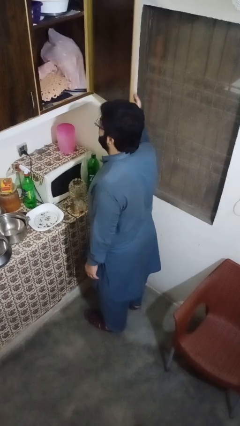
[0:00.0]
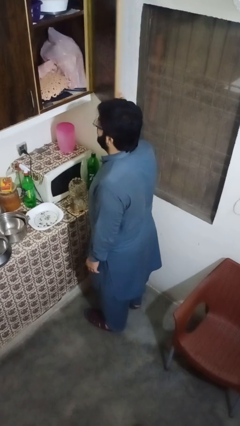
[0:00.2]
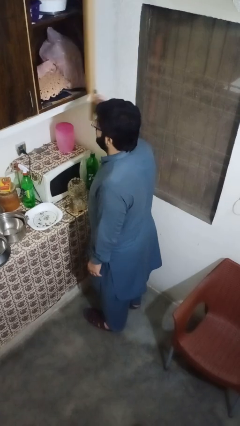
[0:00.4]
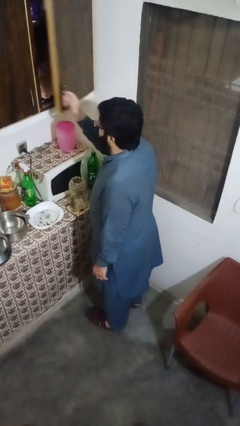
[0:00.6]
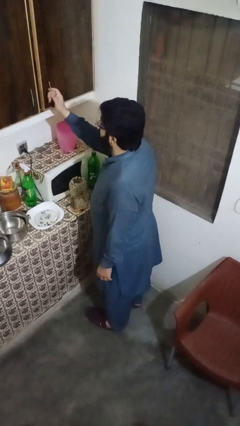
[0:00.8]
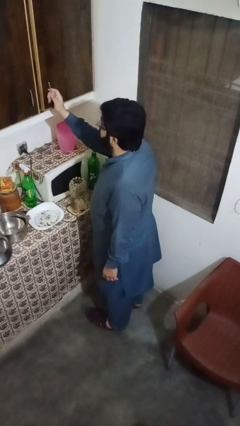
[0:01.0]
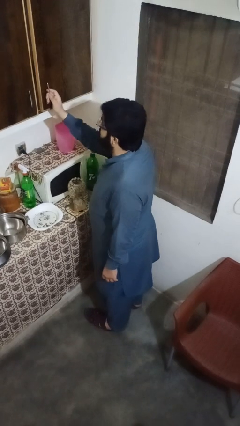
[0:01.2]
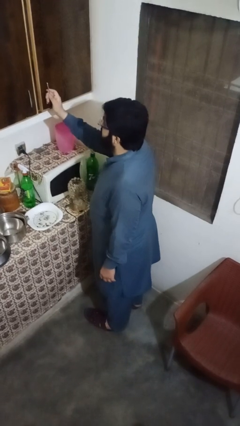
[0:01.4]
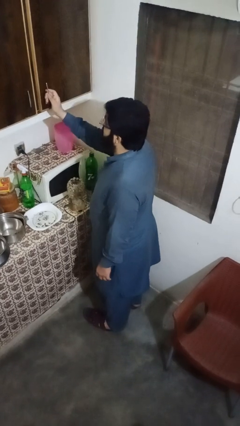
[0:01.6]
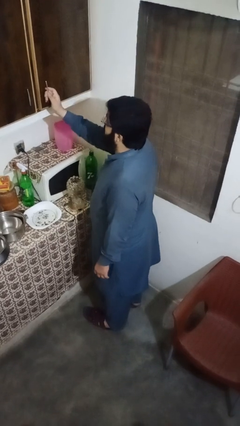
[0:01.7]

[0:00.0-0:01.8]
person closes cabinet

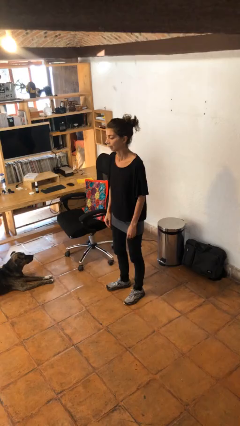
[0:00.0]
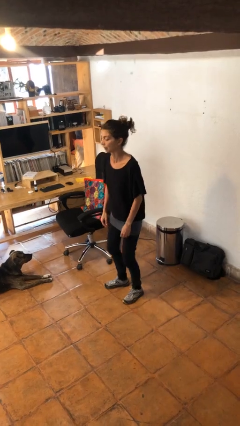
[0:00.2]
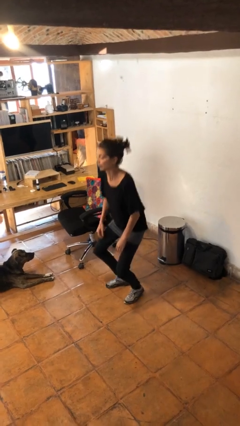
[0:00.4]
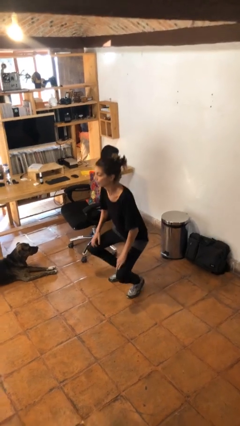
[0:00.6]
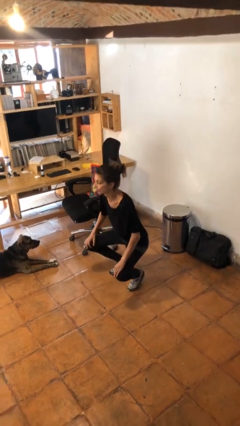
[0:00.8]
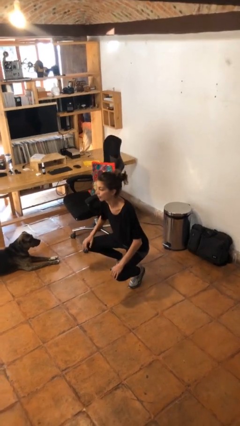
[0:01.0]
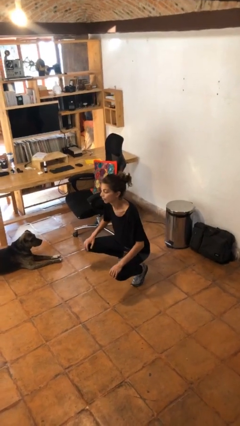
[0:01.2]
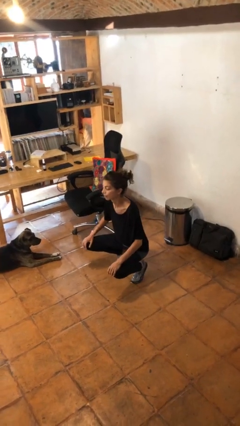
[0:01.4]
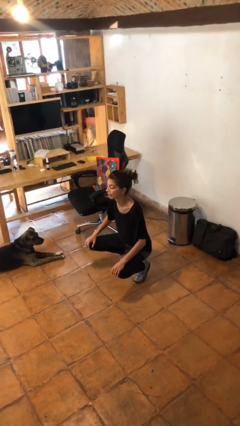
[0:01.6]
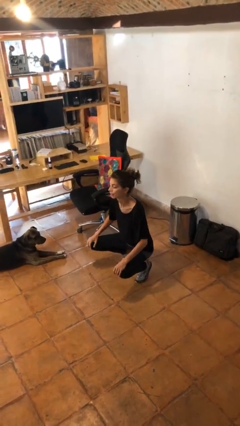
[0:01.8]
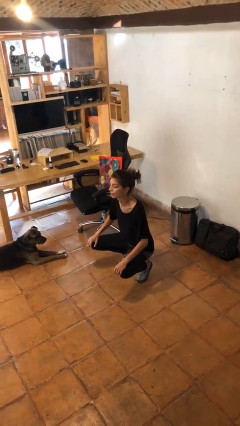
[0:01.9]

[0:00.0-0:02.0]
person squats

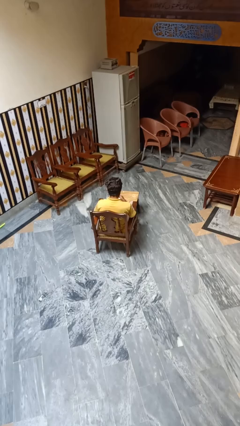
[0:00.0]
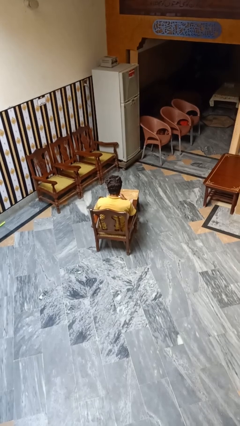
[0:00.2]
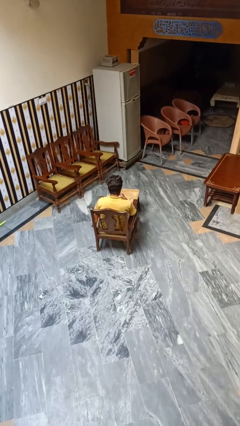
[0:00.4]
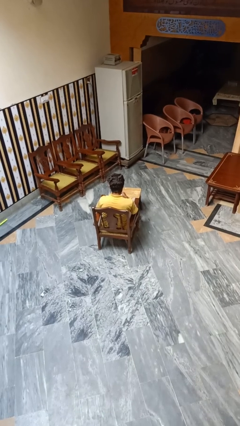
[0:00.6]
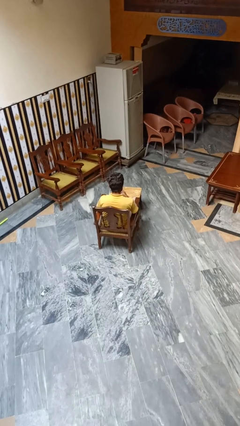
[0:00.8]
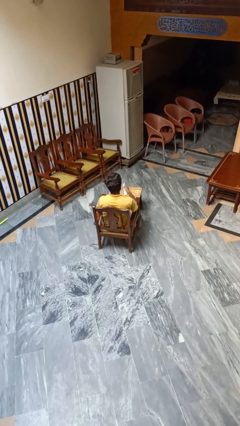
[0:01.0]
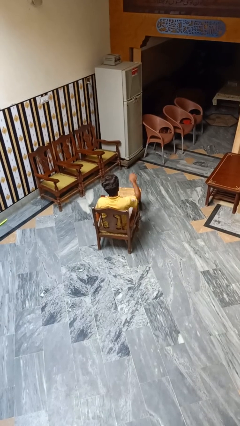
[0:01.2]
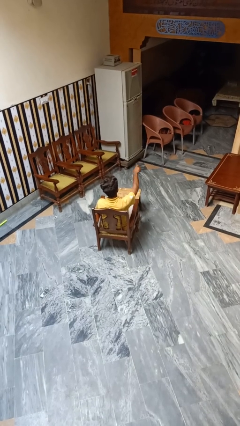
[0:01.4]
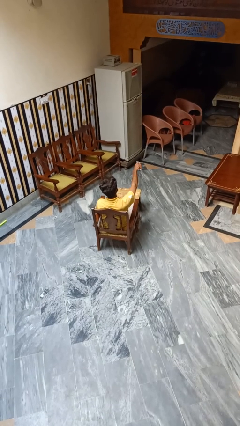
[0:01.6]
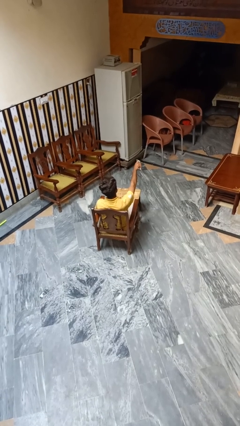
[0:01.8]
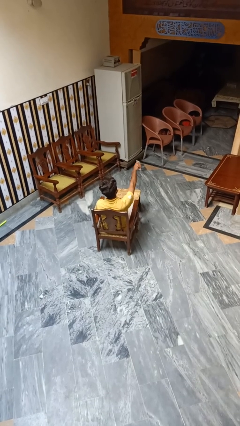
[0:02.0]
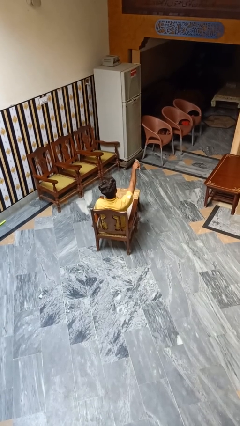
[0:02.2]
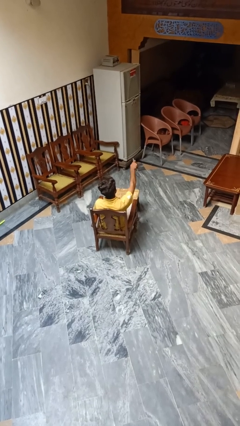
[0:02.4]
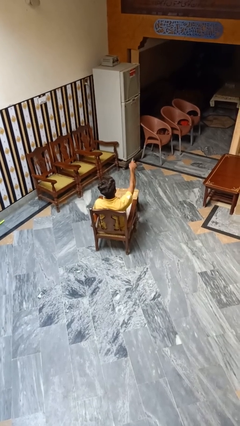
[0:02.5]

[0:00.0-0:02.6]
person uses television remote

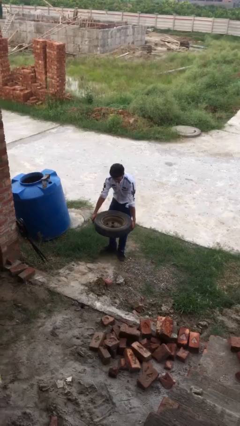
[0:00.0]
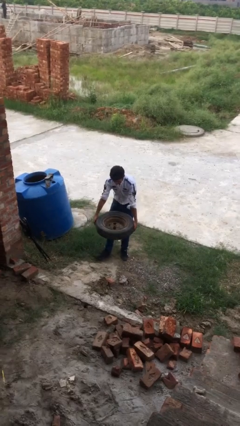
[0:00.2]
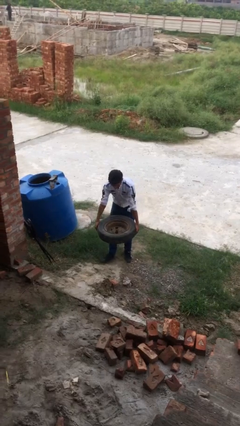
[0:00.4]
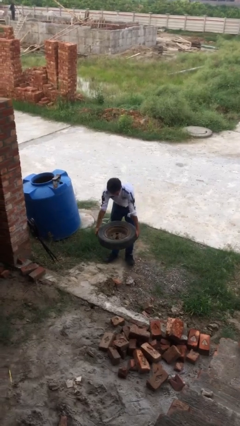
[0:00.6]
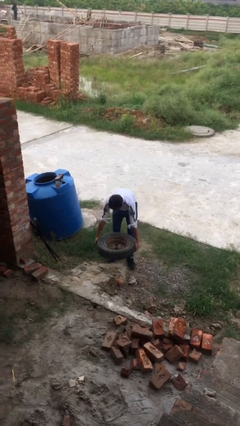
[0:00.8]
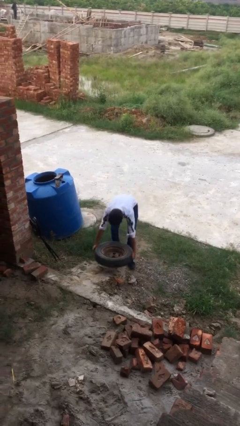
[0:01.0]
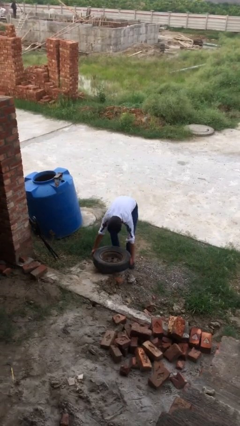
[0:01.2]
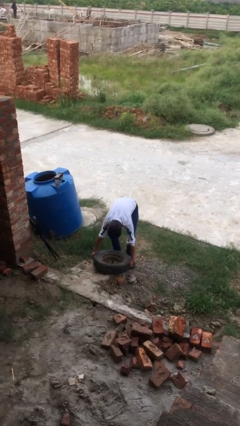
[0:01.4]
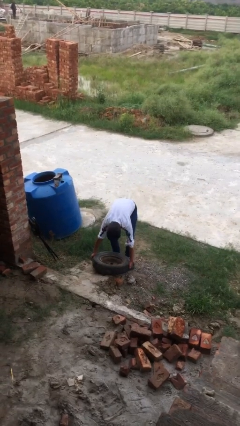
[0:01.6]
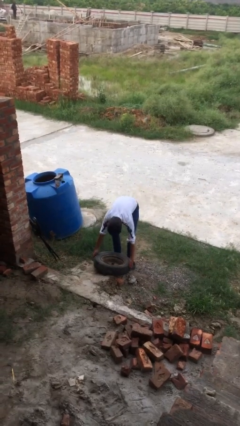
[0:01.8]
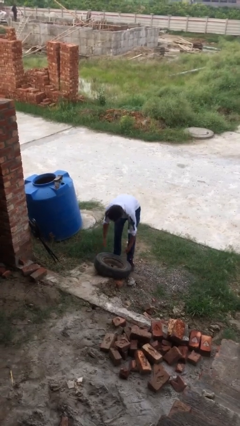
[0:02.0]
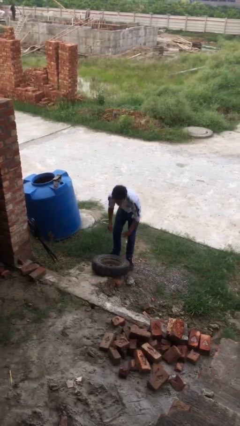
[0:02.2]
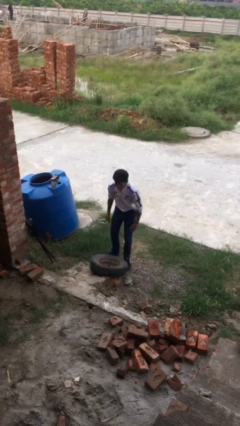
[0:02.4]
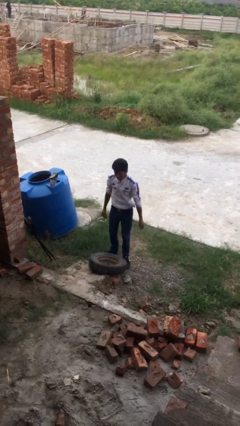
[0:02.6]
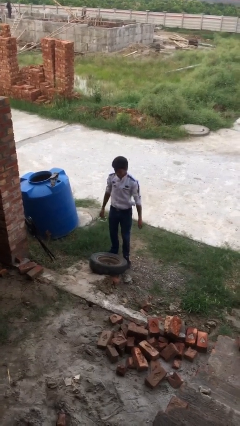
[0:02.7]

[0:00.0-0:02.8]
person puts down object on floor

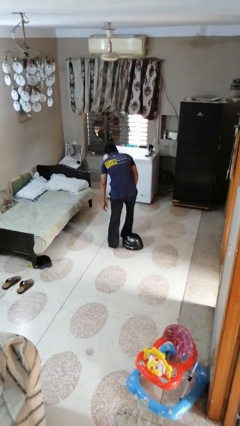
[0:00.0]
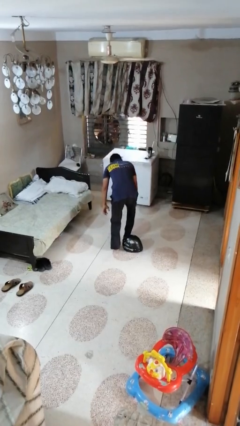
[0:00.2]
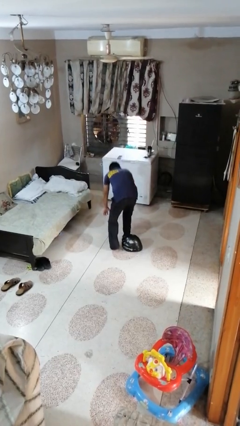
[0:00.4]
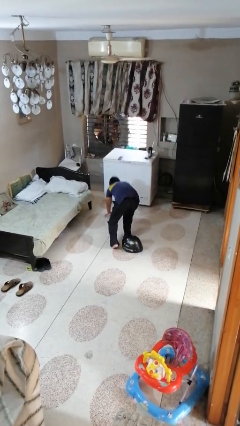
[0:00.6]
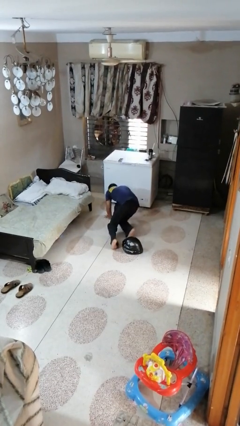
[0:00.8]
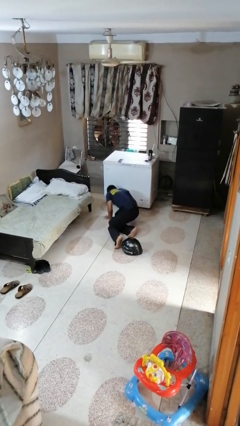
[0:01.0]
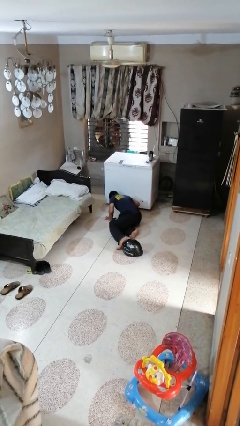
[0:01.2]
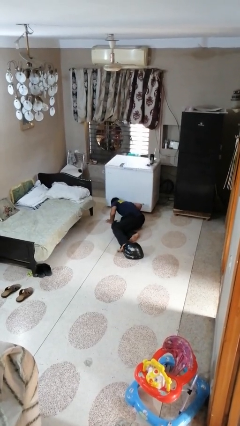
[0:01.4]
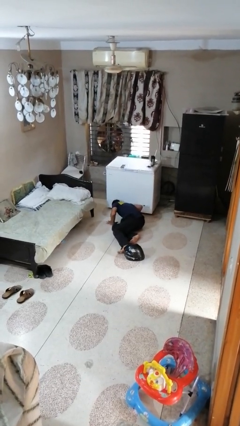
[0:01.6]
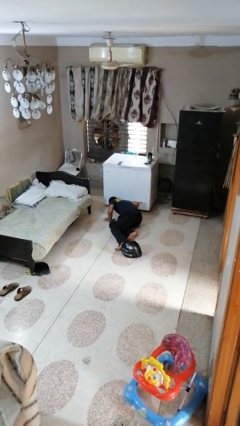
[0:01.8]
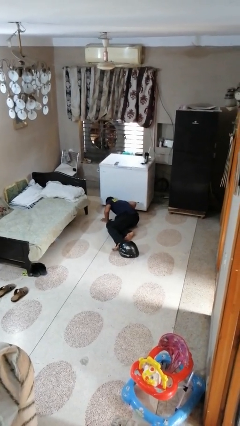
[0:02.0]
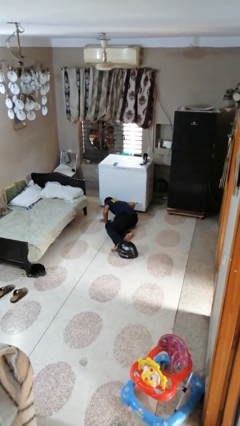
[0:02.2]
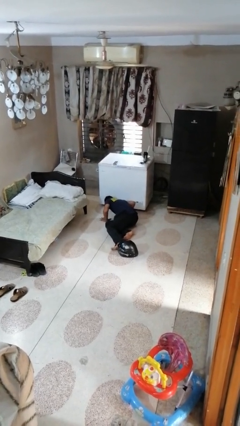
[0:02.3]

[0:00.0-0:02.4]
person lies down on floor

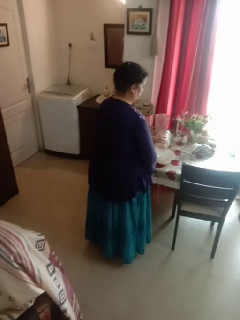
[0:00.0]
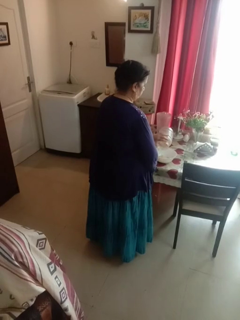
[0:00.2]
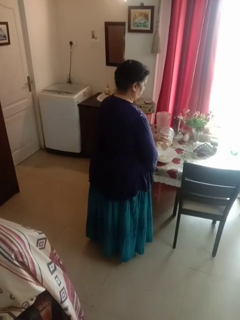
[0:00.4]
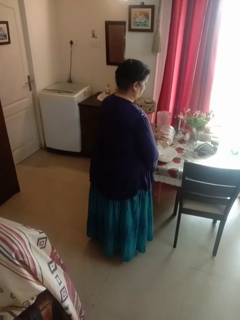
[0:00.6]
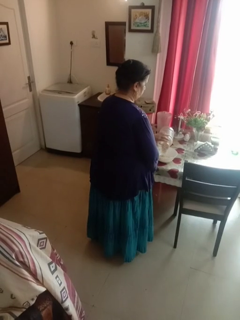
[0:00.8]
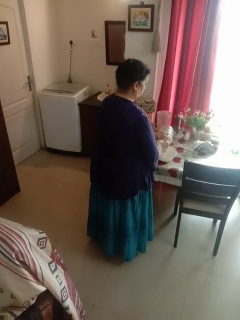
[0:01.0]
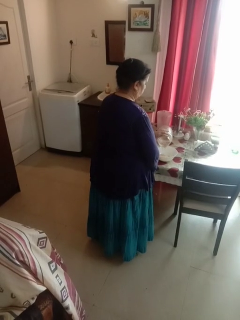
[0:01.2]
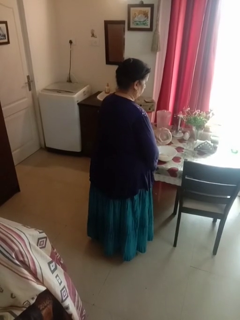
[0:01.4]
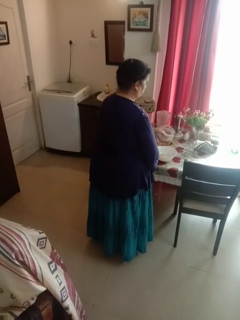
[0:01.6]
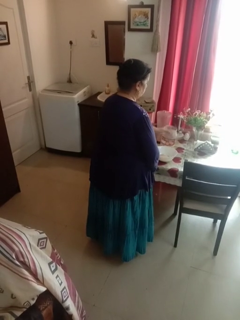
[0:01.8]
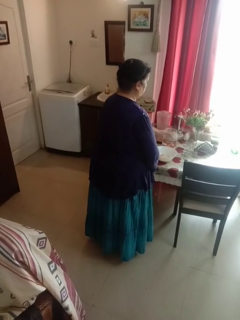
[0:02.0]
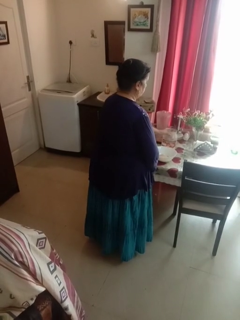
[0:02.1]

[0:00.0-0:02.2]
person pours into bowl

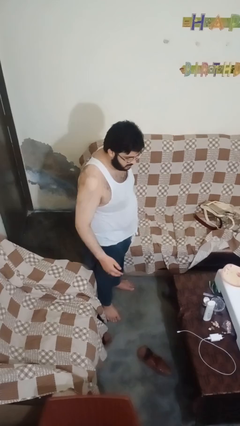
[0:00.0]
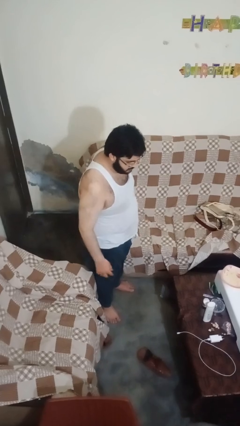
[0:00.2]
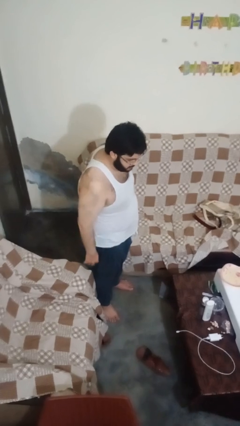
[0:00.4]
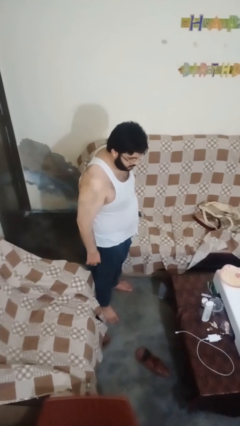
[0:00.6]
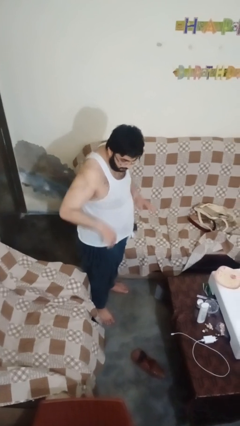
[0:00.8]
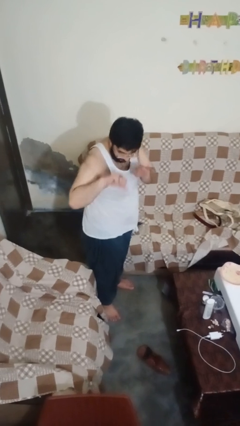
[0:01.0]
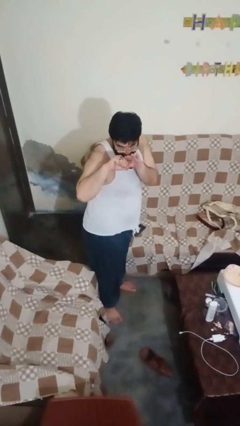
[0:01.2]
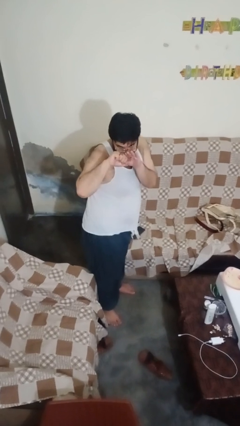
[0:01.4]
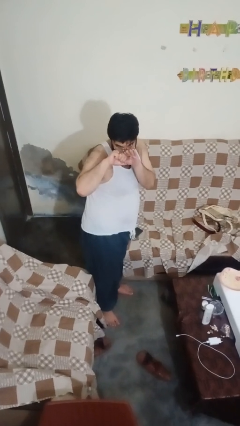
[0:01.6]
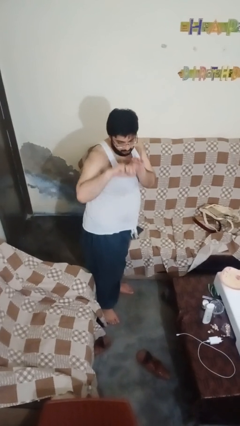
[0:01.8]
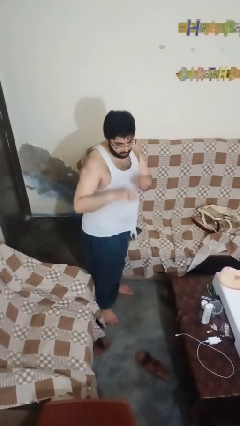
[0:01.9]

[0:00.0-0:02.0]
person karate chop

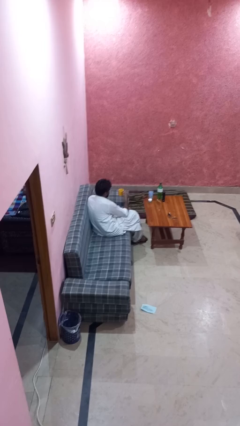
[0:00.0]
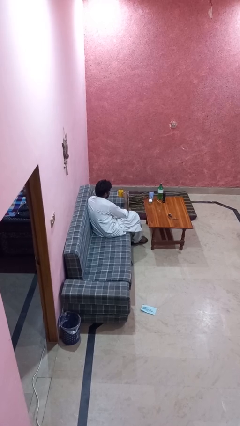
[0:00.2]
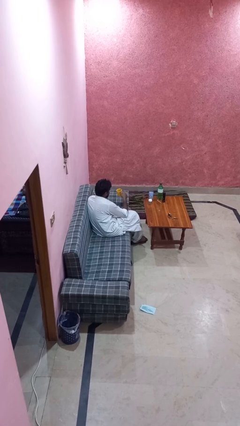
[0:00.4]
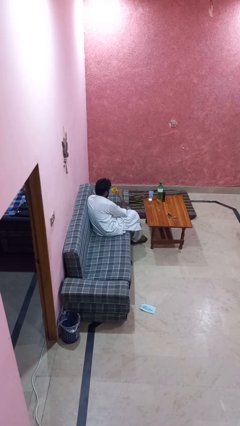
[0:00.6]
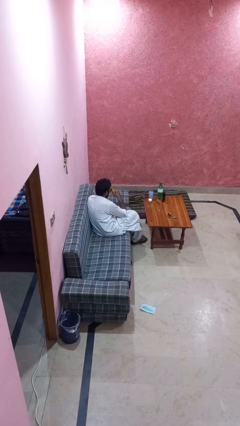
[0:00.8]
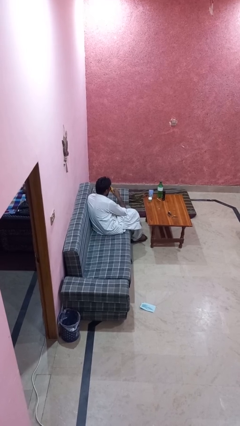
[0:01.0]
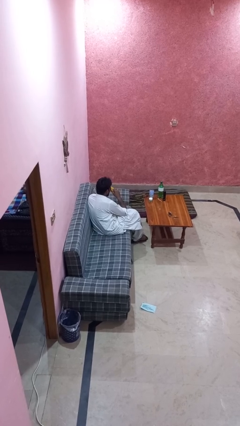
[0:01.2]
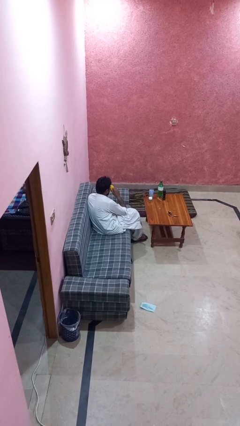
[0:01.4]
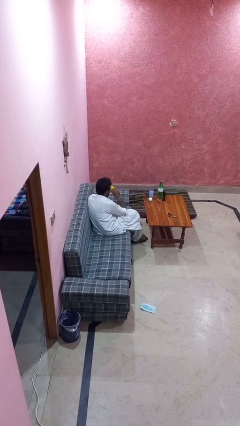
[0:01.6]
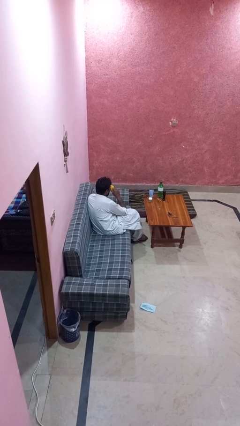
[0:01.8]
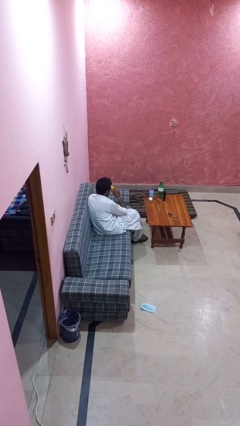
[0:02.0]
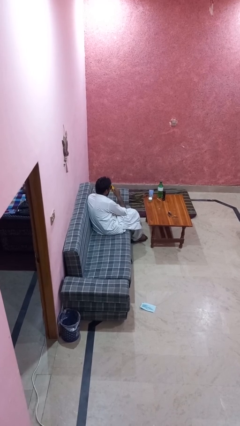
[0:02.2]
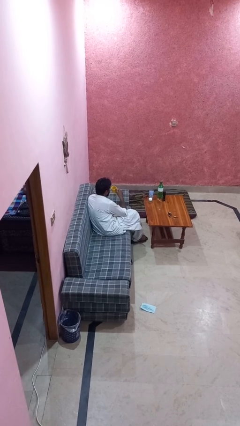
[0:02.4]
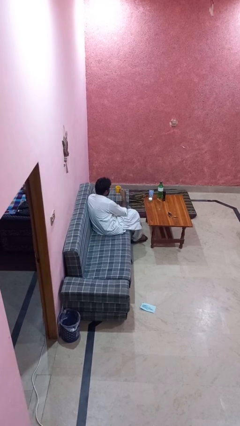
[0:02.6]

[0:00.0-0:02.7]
person drinks from mug
